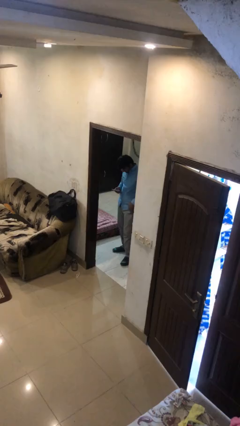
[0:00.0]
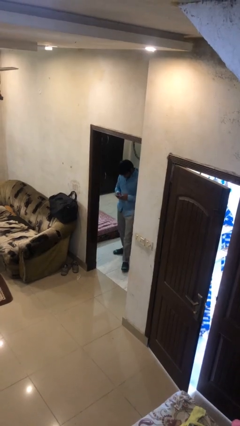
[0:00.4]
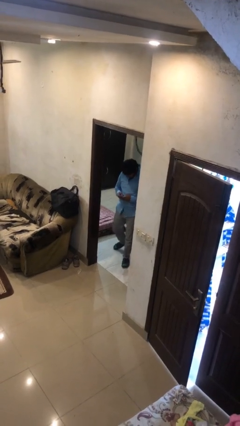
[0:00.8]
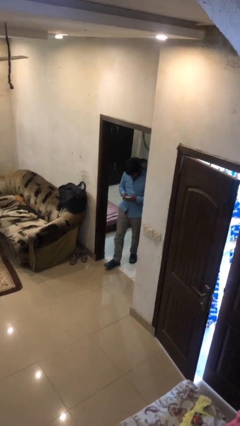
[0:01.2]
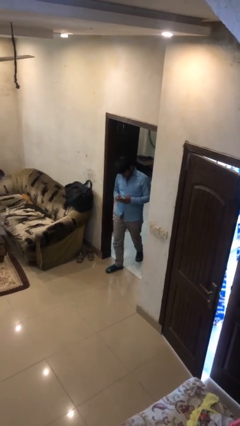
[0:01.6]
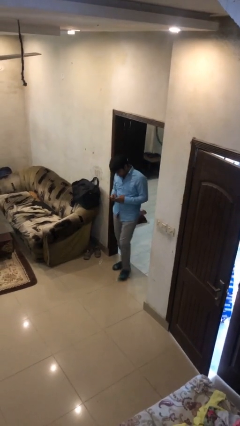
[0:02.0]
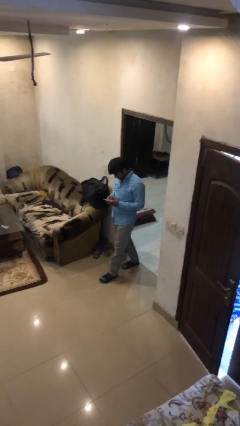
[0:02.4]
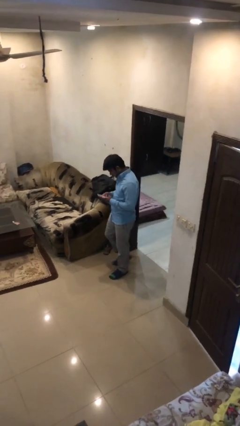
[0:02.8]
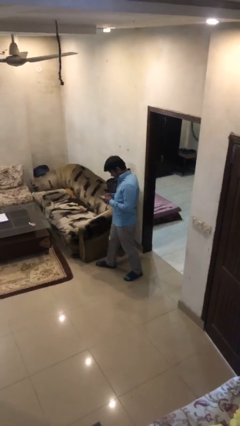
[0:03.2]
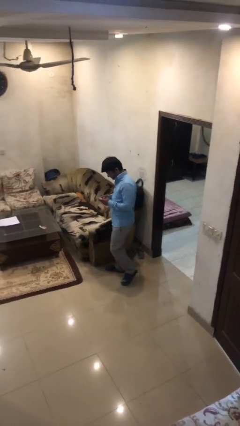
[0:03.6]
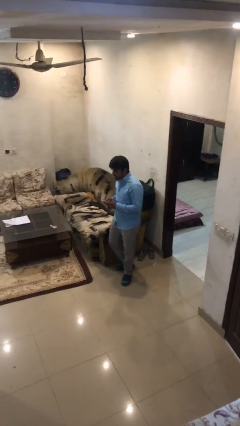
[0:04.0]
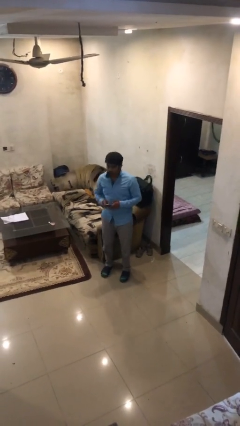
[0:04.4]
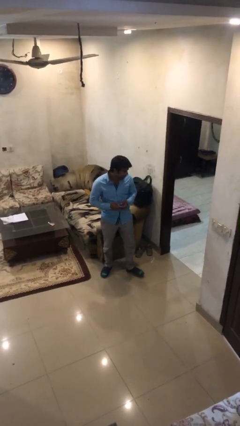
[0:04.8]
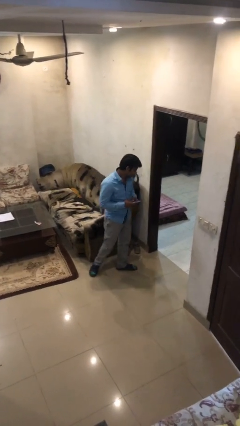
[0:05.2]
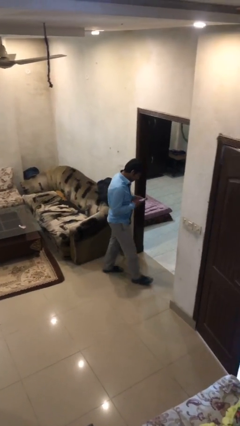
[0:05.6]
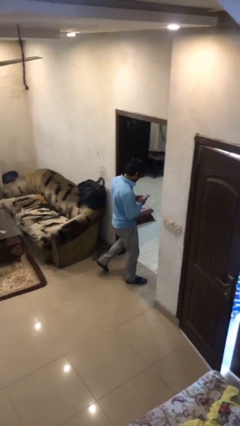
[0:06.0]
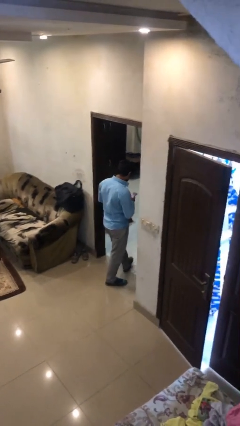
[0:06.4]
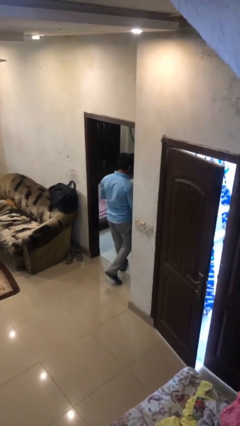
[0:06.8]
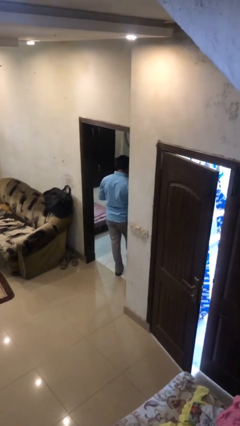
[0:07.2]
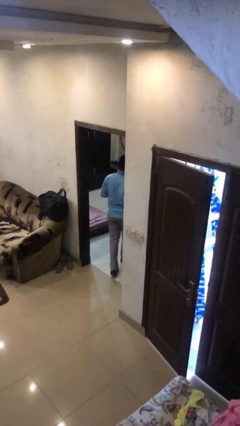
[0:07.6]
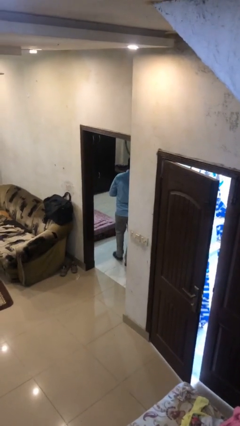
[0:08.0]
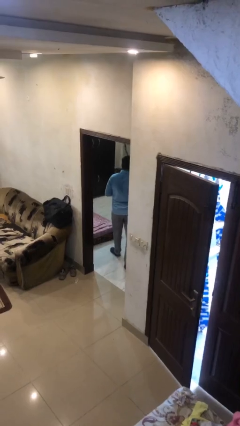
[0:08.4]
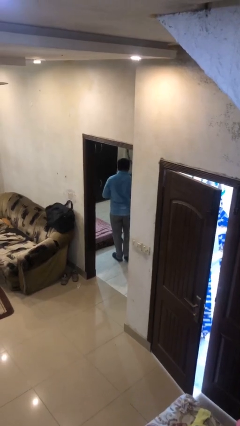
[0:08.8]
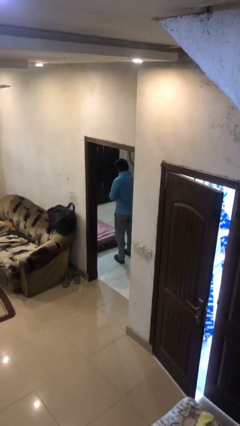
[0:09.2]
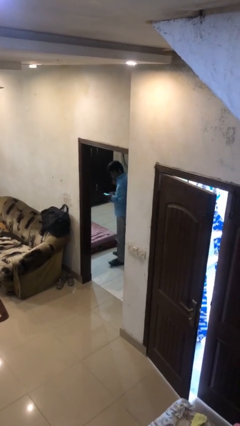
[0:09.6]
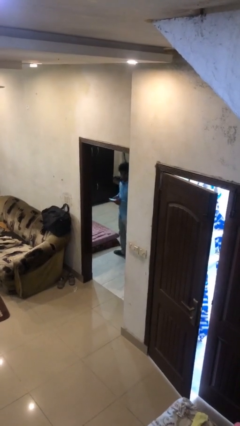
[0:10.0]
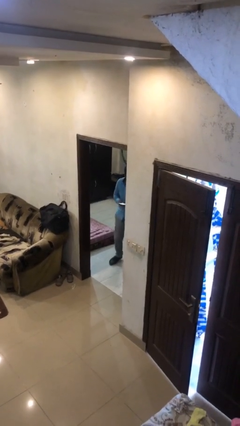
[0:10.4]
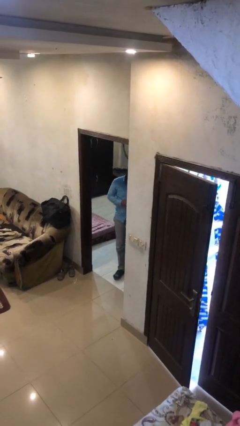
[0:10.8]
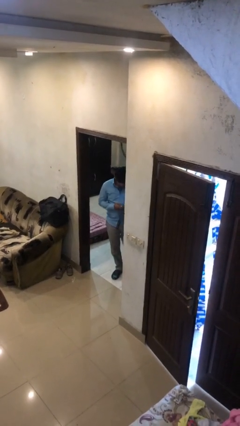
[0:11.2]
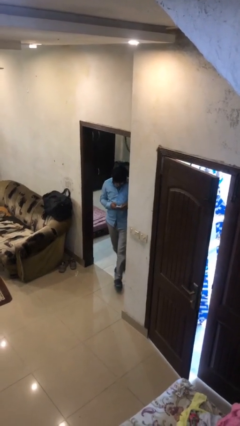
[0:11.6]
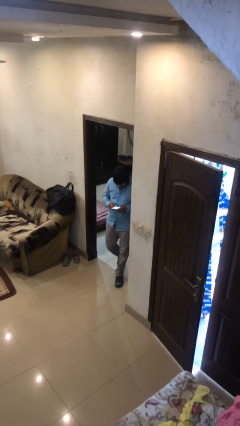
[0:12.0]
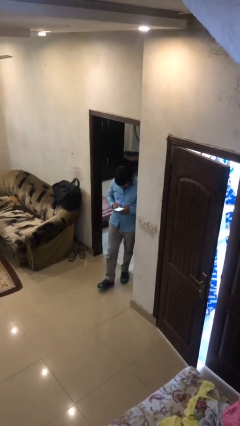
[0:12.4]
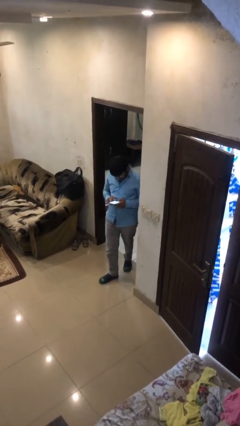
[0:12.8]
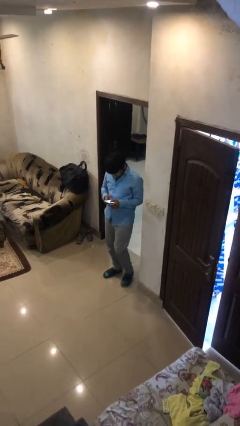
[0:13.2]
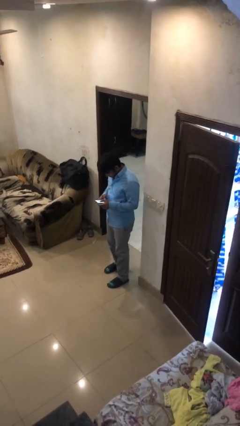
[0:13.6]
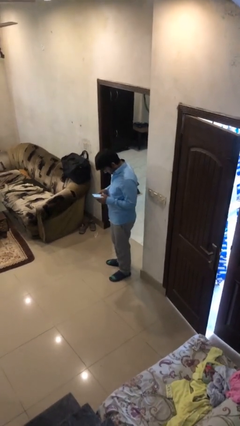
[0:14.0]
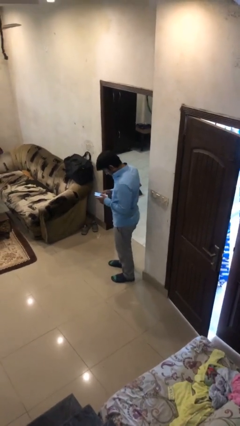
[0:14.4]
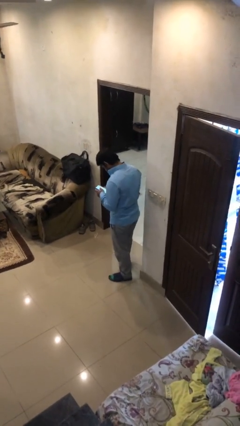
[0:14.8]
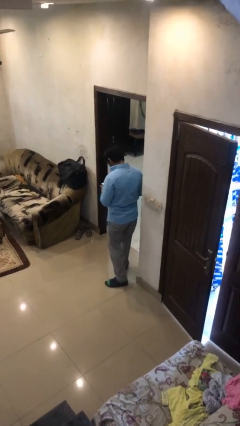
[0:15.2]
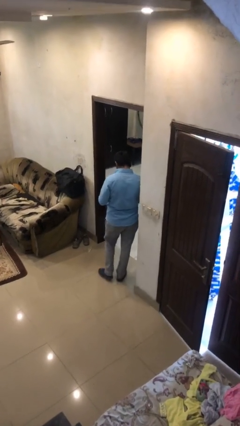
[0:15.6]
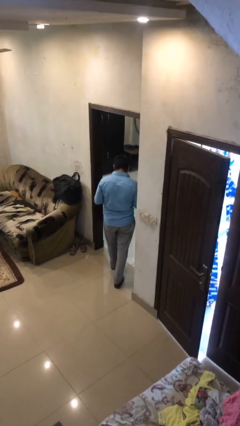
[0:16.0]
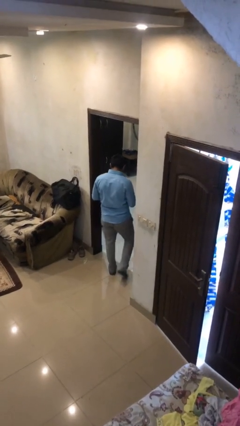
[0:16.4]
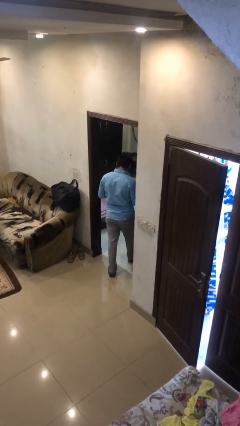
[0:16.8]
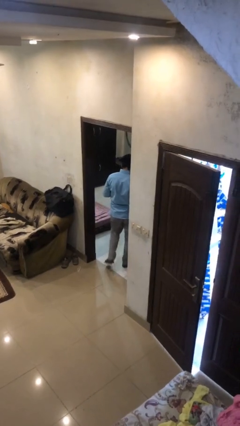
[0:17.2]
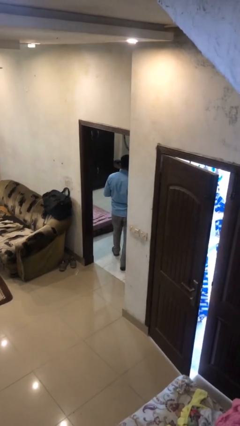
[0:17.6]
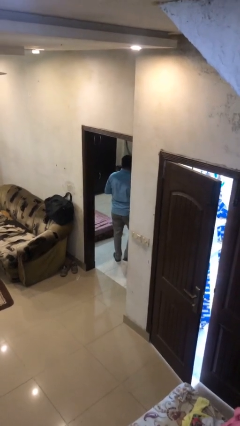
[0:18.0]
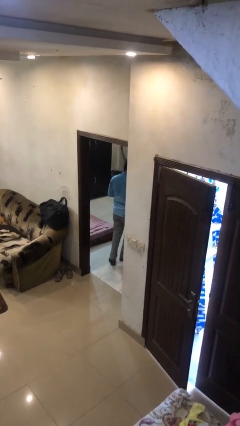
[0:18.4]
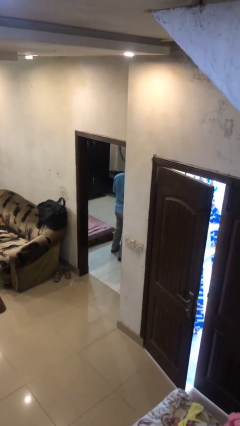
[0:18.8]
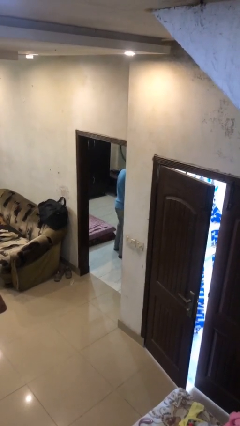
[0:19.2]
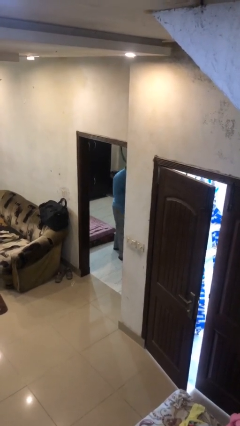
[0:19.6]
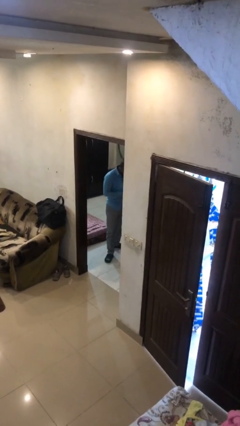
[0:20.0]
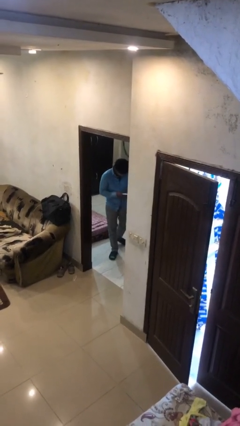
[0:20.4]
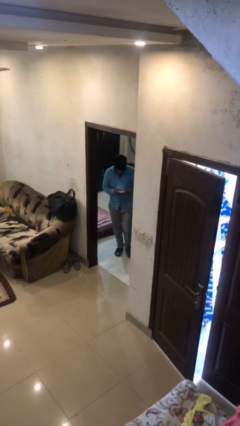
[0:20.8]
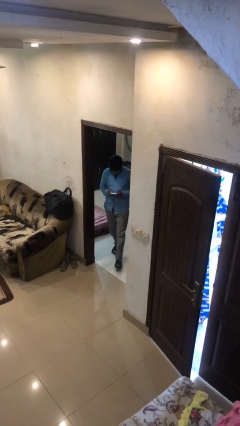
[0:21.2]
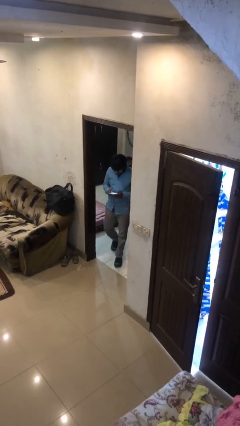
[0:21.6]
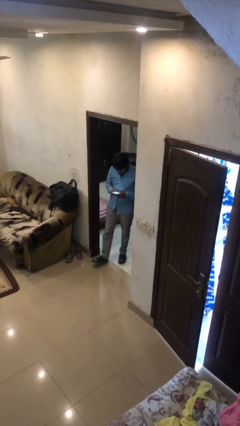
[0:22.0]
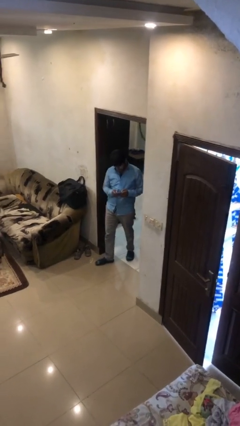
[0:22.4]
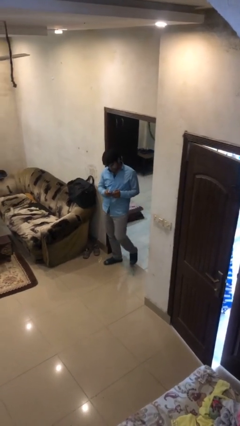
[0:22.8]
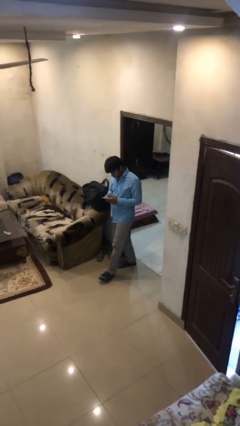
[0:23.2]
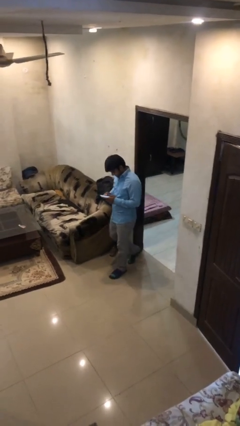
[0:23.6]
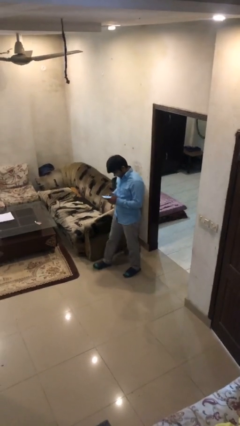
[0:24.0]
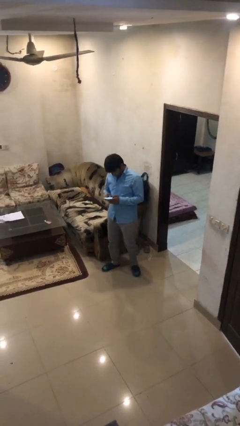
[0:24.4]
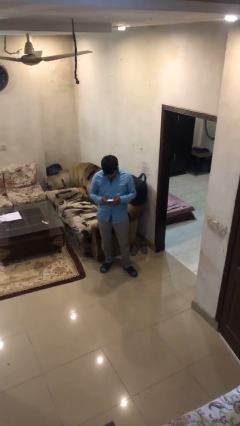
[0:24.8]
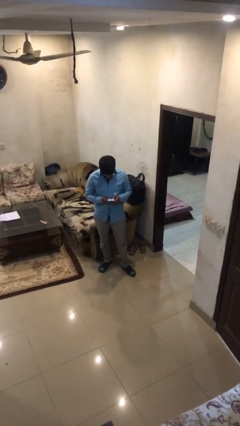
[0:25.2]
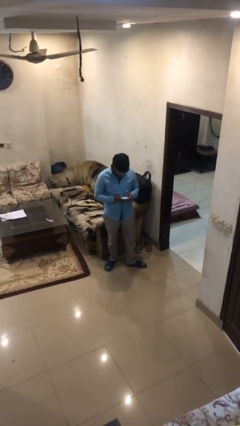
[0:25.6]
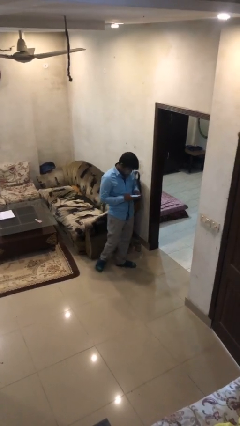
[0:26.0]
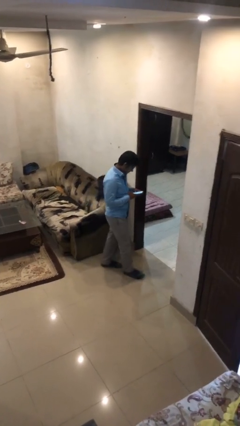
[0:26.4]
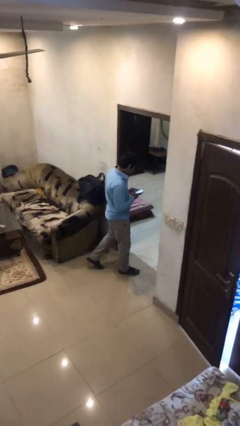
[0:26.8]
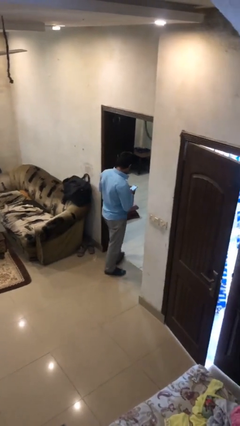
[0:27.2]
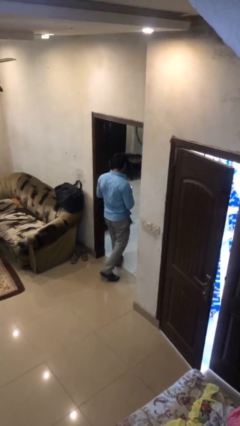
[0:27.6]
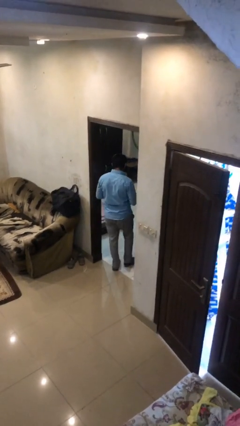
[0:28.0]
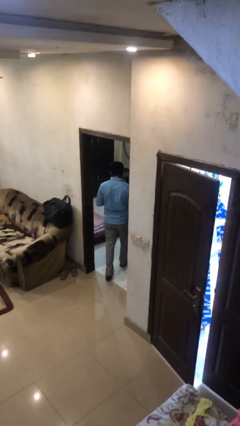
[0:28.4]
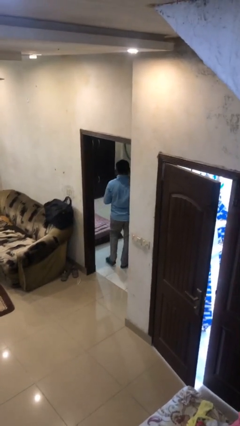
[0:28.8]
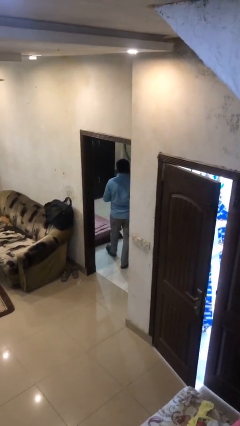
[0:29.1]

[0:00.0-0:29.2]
person texts on phone

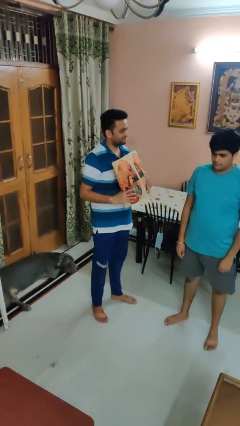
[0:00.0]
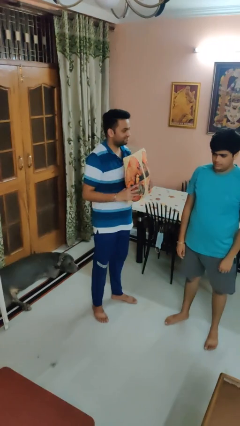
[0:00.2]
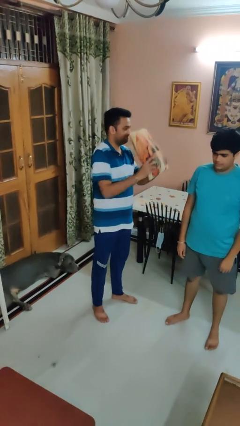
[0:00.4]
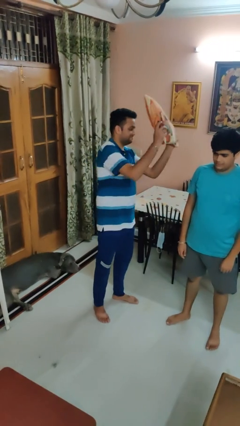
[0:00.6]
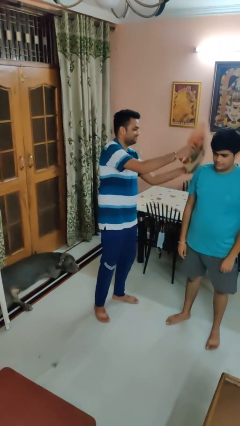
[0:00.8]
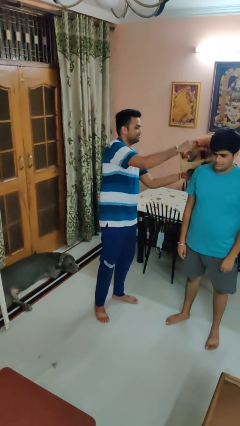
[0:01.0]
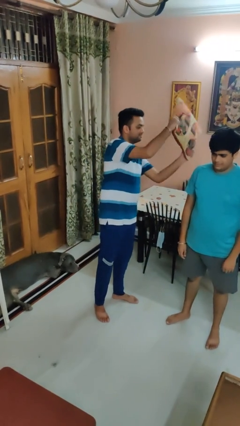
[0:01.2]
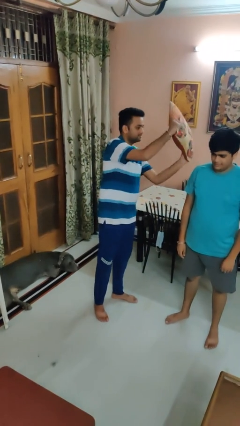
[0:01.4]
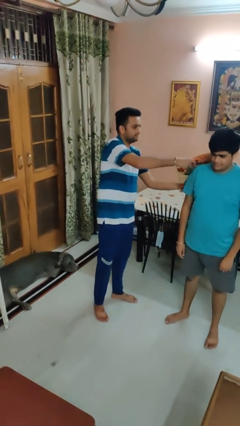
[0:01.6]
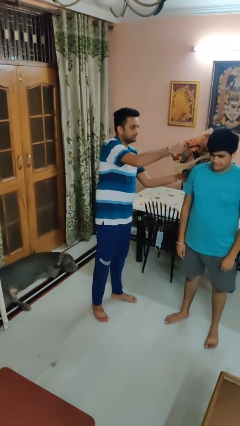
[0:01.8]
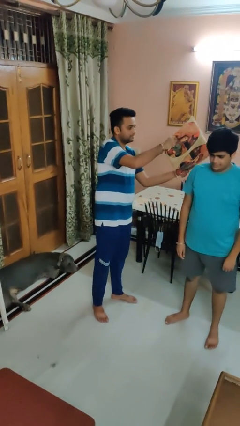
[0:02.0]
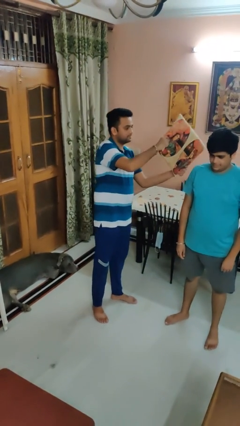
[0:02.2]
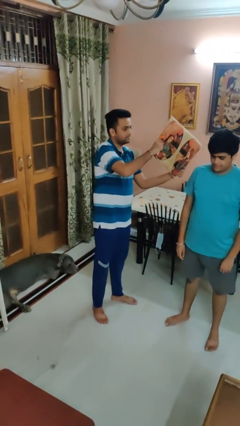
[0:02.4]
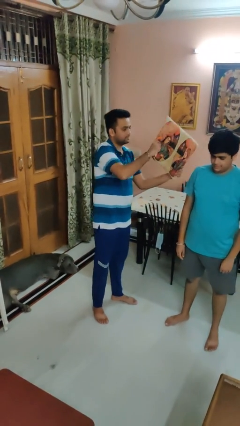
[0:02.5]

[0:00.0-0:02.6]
person hits person with pillow

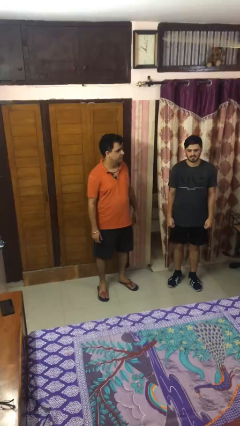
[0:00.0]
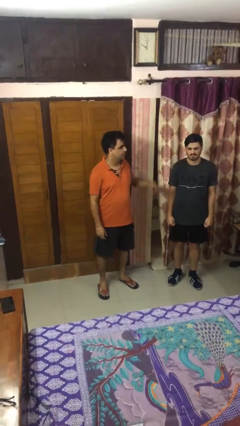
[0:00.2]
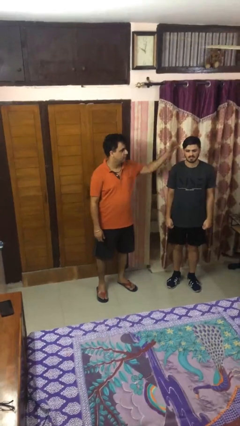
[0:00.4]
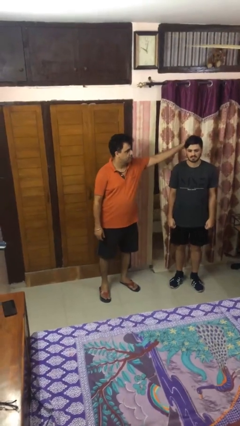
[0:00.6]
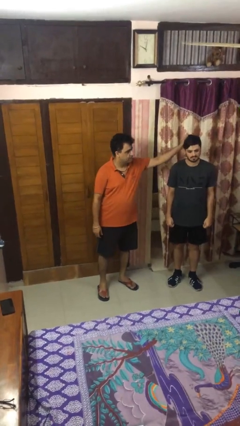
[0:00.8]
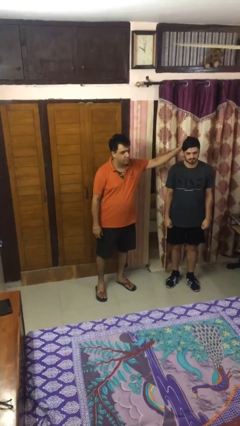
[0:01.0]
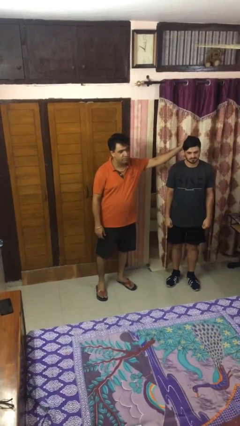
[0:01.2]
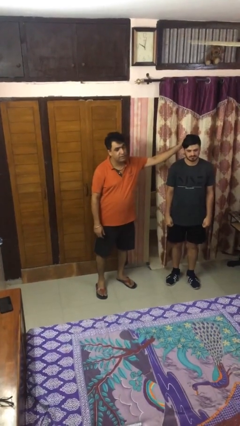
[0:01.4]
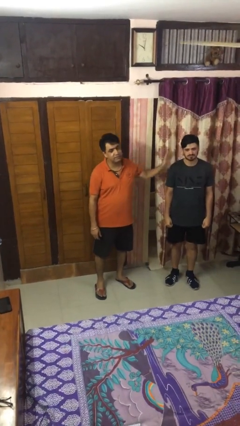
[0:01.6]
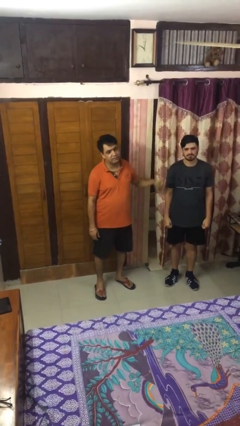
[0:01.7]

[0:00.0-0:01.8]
person grabs person by hair
